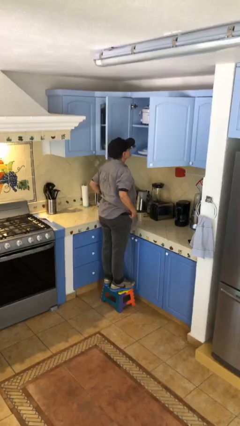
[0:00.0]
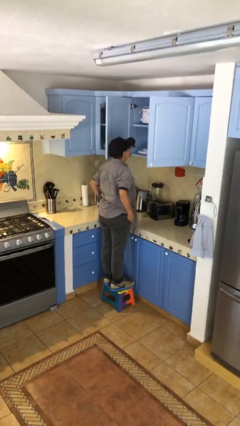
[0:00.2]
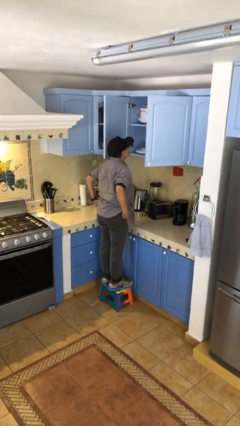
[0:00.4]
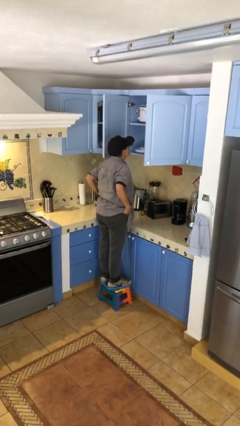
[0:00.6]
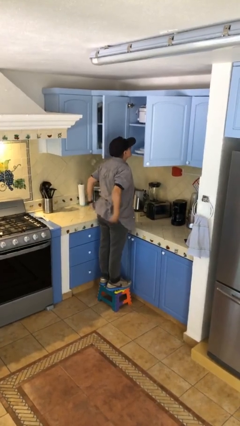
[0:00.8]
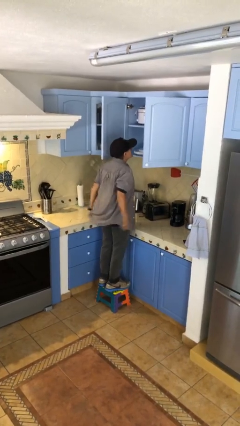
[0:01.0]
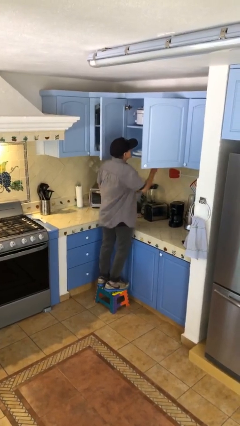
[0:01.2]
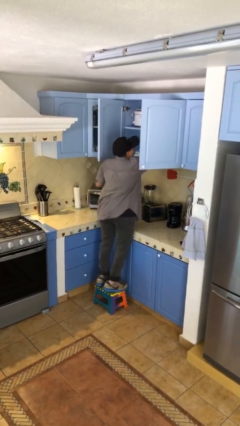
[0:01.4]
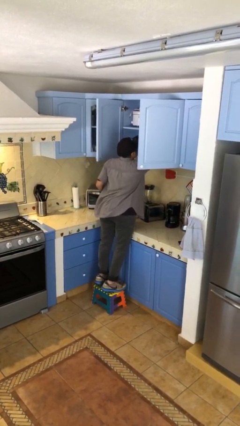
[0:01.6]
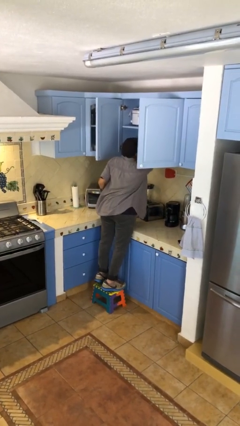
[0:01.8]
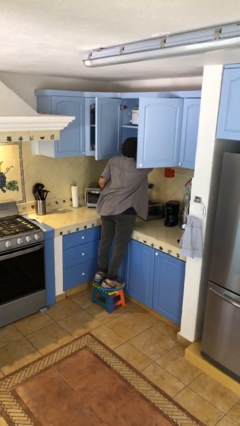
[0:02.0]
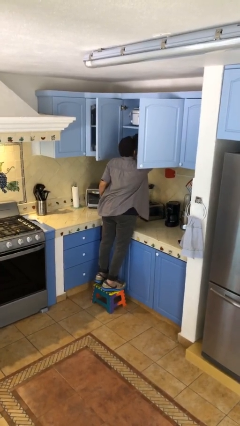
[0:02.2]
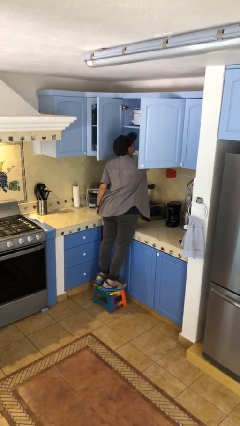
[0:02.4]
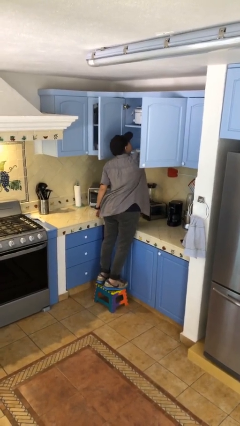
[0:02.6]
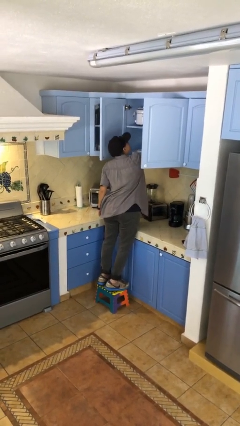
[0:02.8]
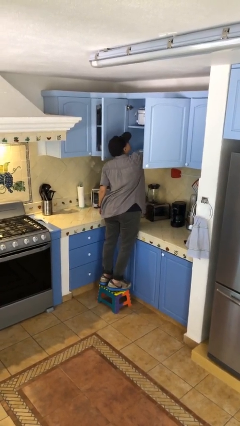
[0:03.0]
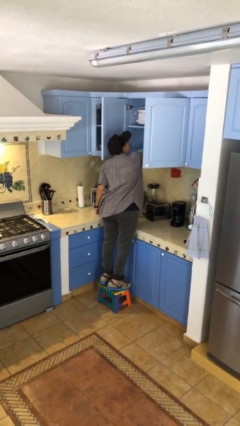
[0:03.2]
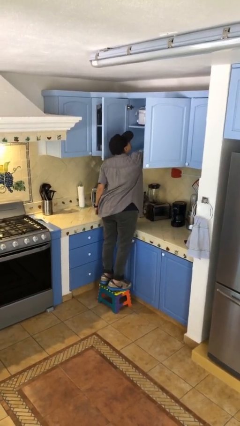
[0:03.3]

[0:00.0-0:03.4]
person searches in cabinet

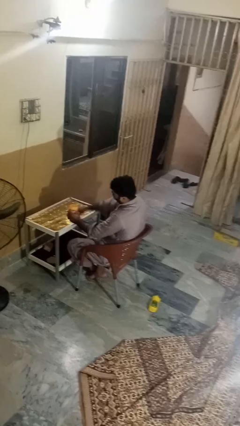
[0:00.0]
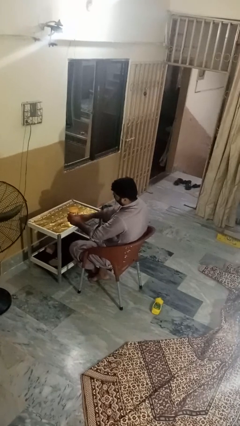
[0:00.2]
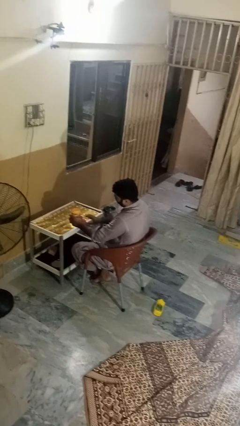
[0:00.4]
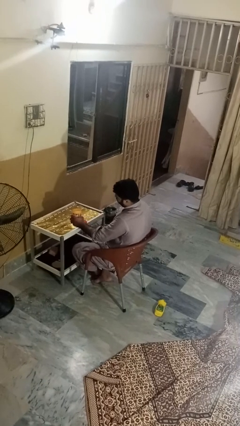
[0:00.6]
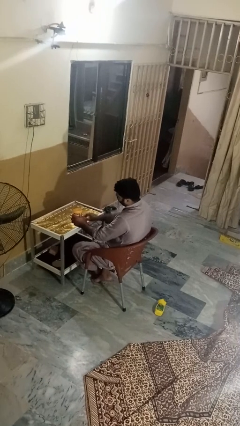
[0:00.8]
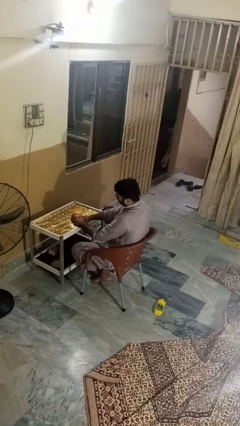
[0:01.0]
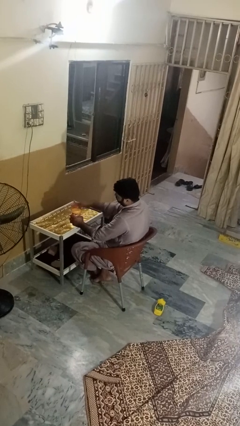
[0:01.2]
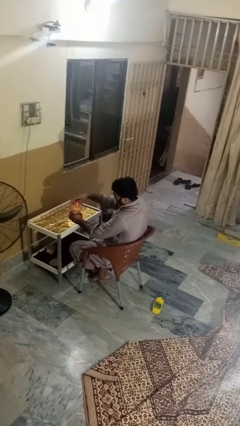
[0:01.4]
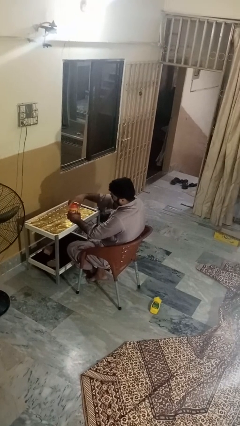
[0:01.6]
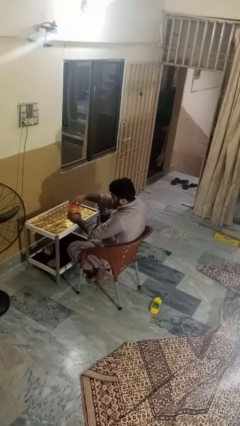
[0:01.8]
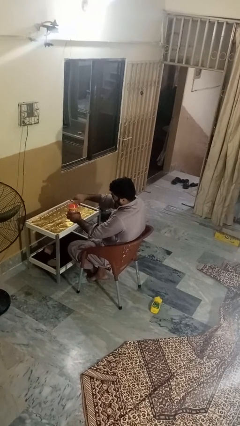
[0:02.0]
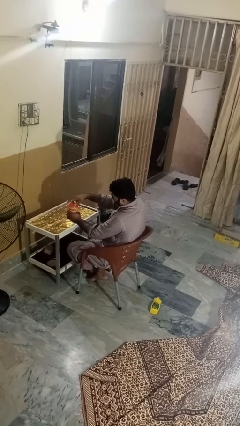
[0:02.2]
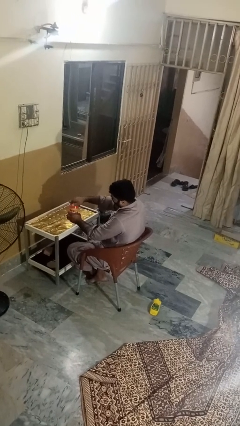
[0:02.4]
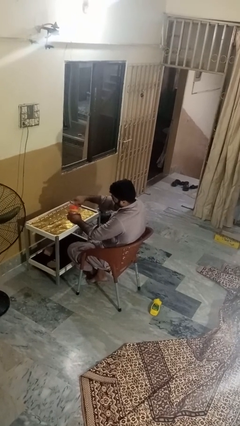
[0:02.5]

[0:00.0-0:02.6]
person closes jar

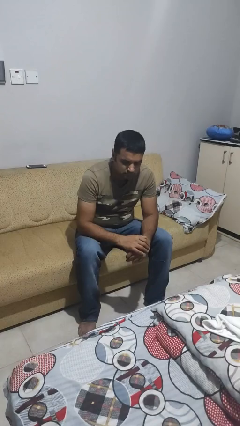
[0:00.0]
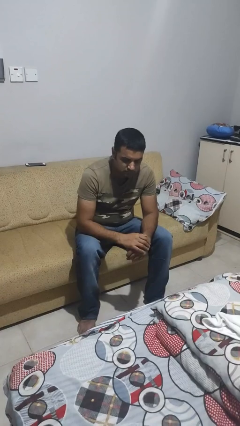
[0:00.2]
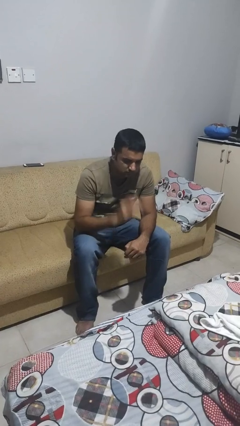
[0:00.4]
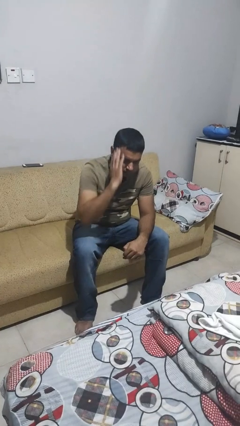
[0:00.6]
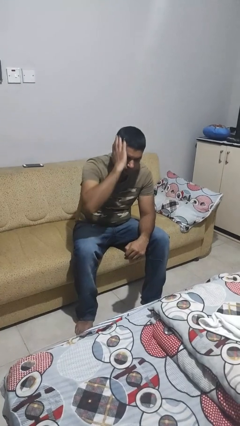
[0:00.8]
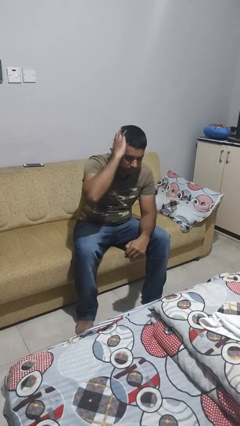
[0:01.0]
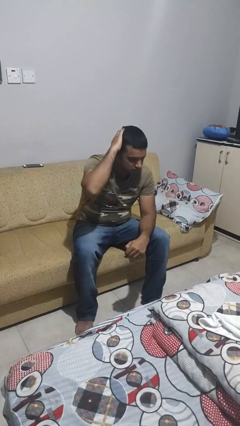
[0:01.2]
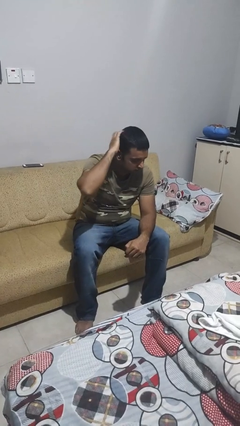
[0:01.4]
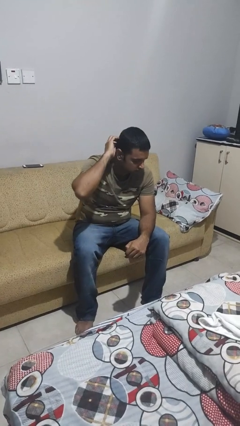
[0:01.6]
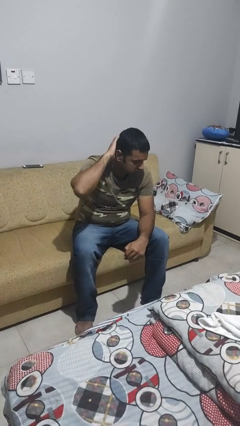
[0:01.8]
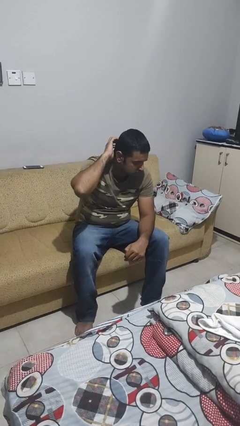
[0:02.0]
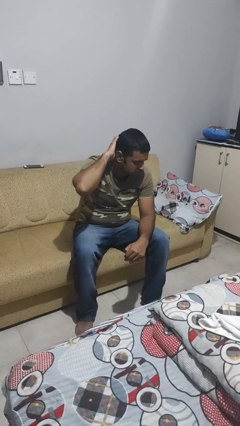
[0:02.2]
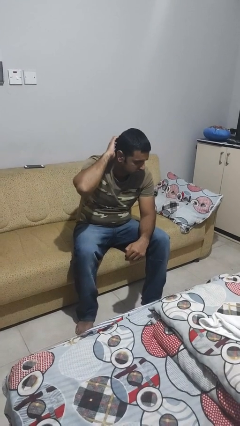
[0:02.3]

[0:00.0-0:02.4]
person strokes hair

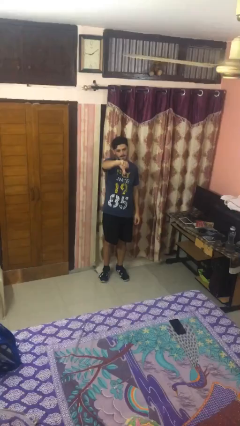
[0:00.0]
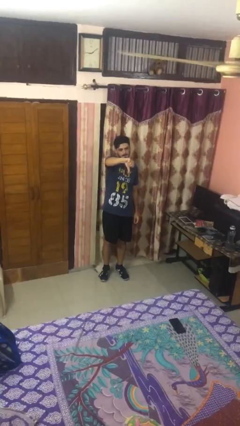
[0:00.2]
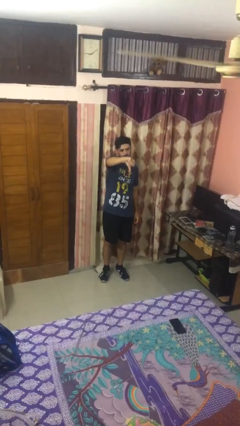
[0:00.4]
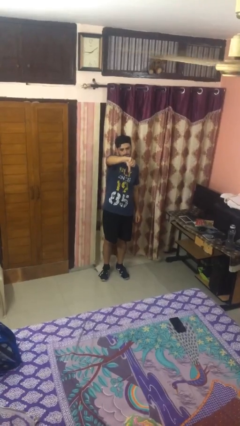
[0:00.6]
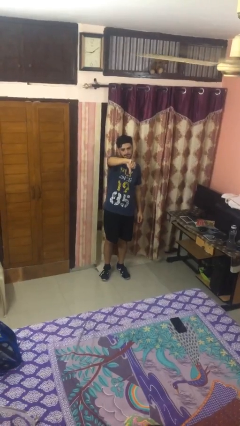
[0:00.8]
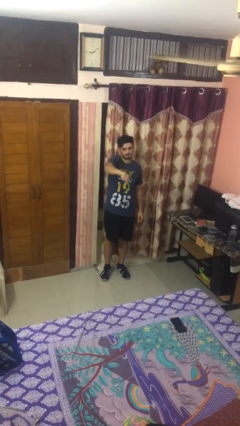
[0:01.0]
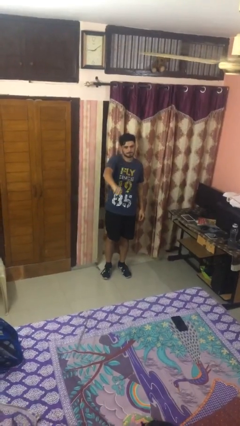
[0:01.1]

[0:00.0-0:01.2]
person gestures thumbs down

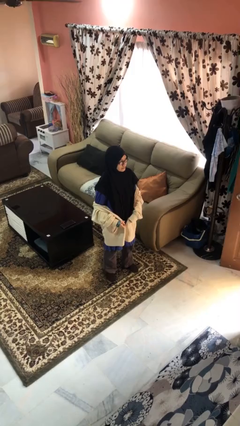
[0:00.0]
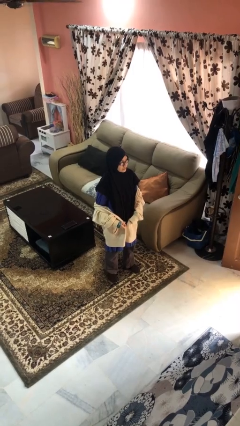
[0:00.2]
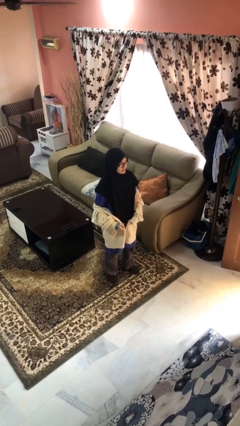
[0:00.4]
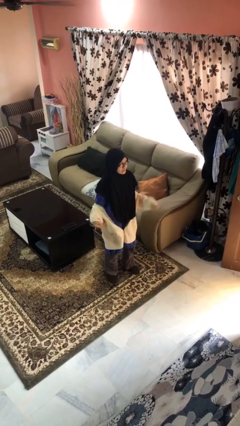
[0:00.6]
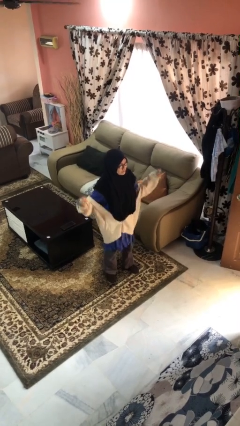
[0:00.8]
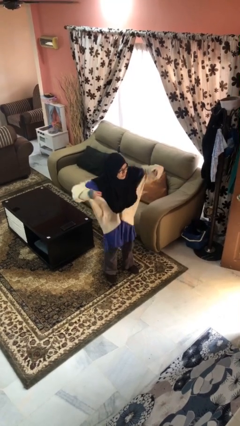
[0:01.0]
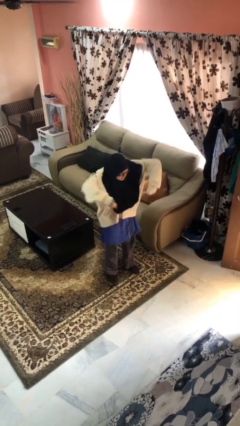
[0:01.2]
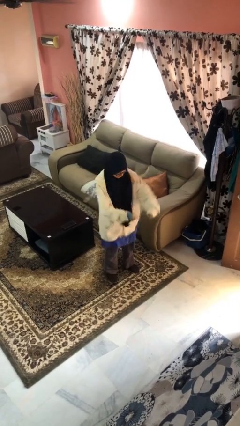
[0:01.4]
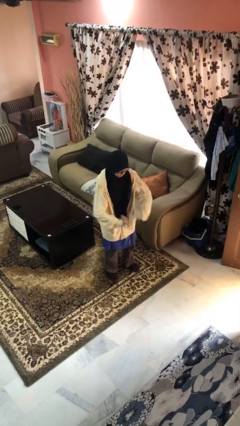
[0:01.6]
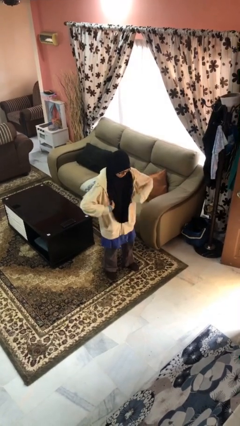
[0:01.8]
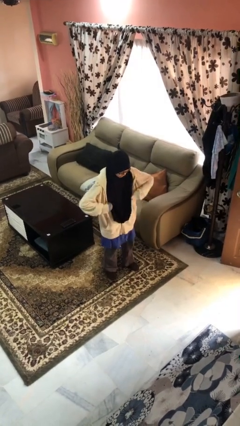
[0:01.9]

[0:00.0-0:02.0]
person puts on jacket

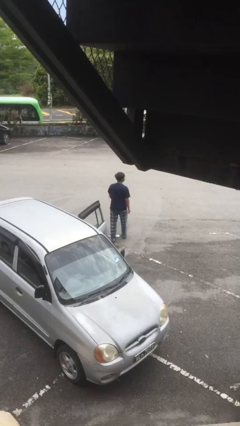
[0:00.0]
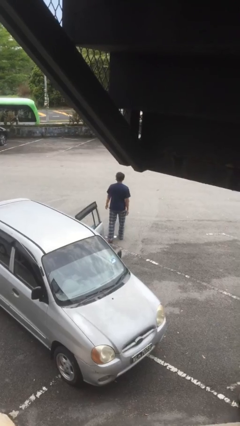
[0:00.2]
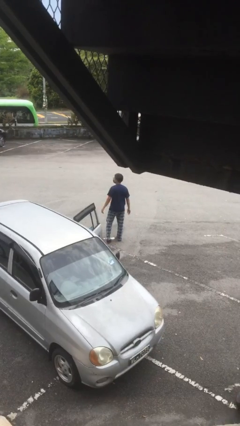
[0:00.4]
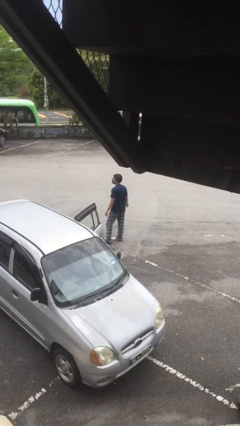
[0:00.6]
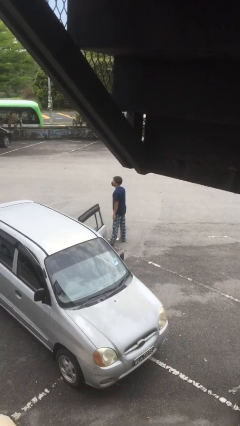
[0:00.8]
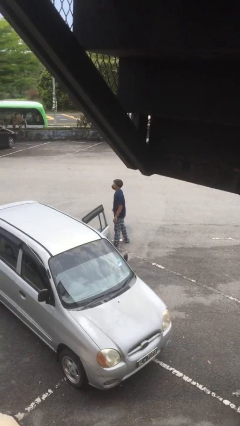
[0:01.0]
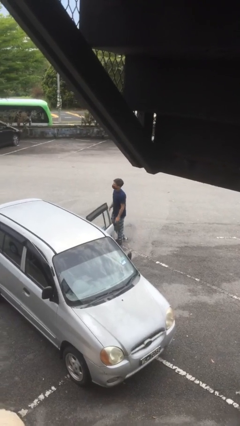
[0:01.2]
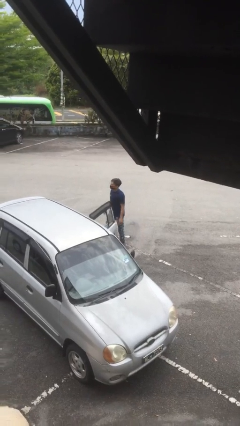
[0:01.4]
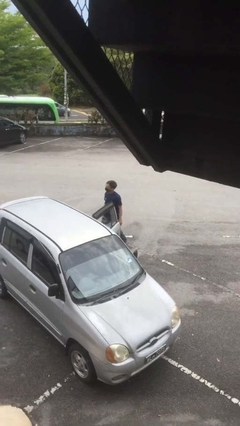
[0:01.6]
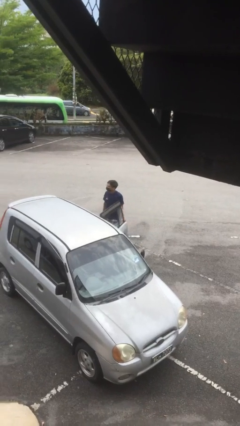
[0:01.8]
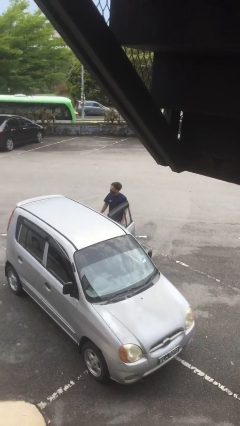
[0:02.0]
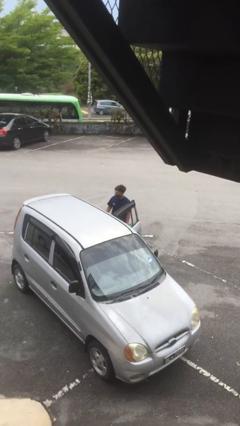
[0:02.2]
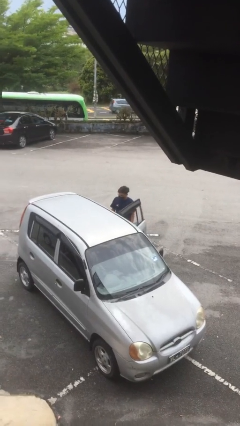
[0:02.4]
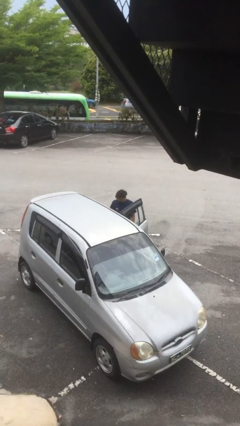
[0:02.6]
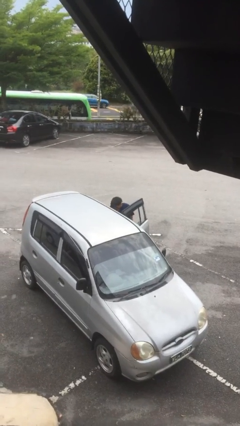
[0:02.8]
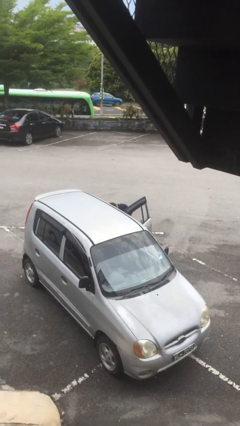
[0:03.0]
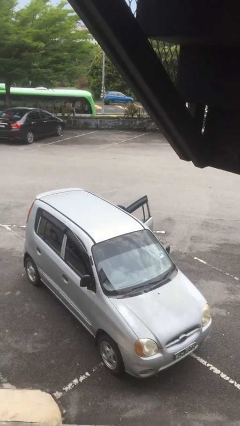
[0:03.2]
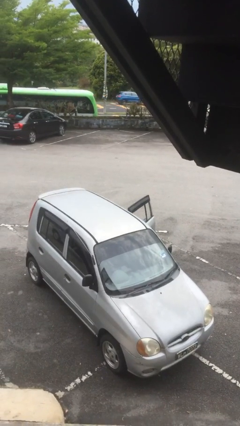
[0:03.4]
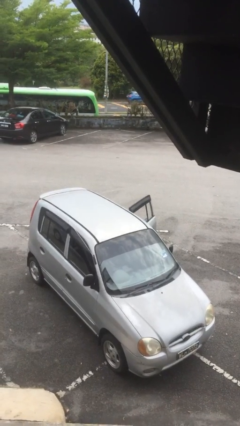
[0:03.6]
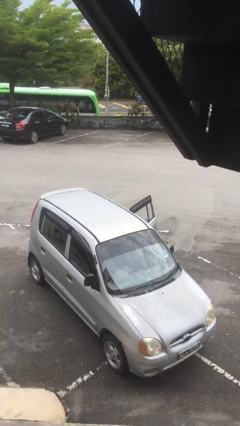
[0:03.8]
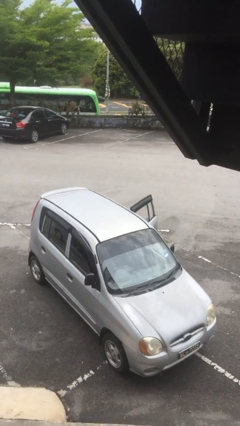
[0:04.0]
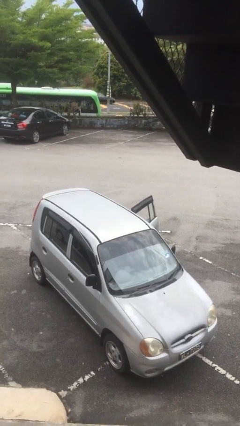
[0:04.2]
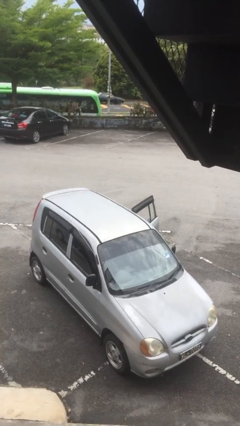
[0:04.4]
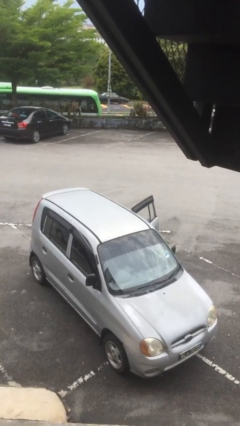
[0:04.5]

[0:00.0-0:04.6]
person enters car

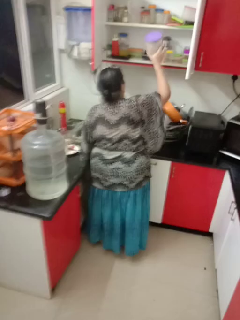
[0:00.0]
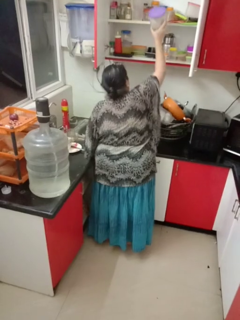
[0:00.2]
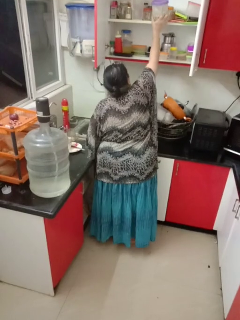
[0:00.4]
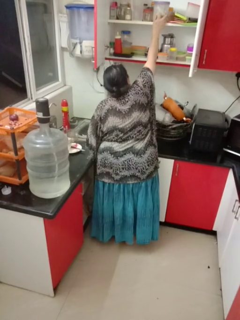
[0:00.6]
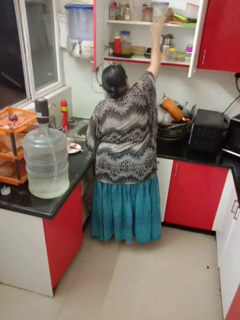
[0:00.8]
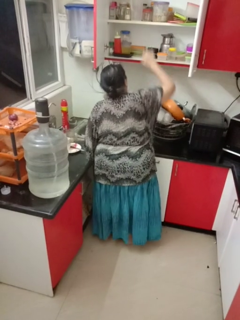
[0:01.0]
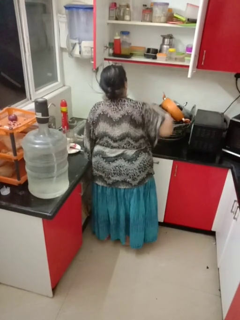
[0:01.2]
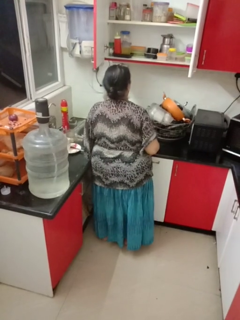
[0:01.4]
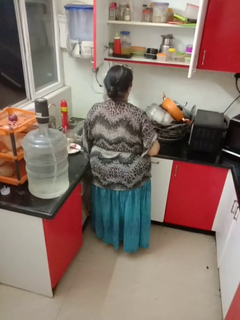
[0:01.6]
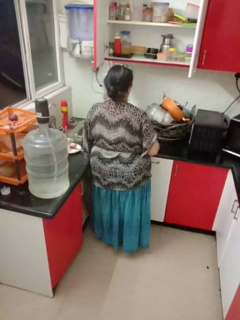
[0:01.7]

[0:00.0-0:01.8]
person puts object in cabinet
